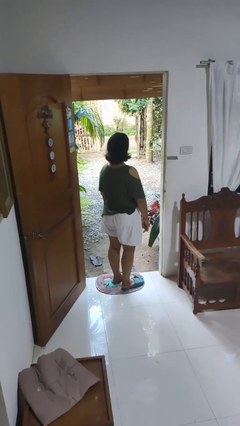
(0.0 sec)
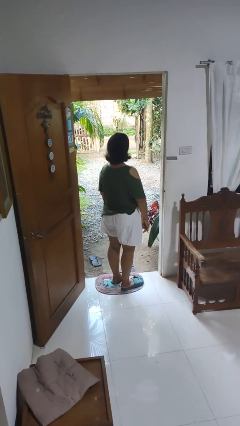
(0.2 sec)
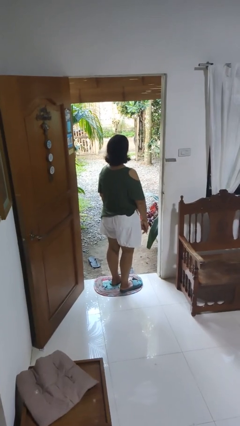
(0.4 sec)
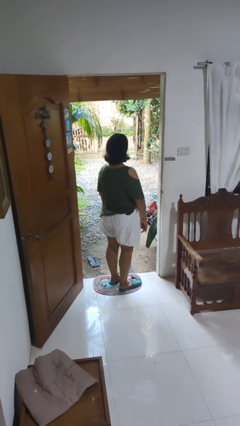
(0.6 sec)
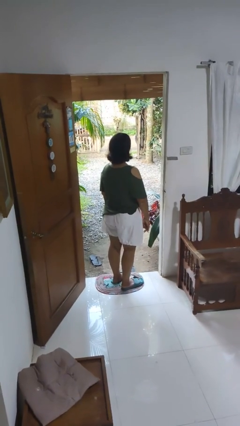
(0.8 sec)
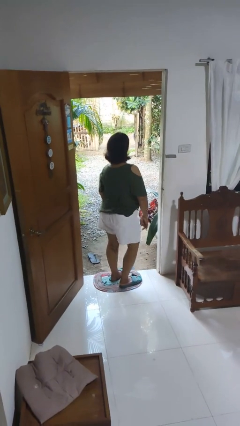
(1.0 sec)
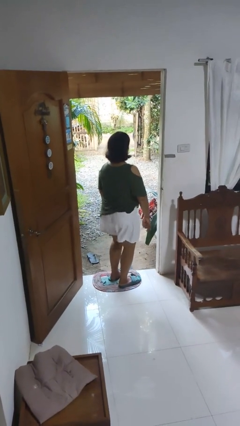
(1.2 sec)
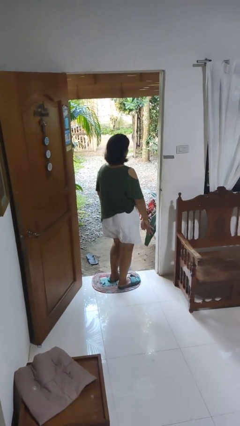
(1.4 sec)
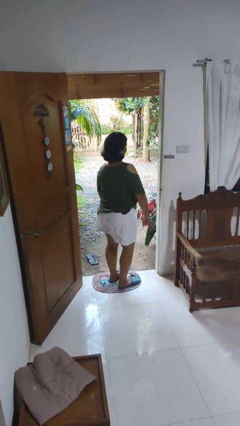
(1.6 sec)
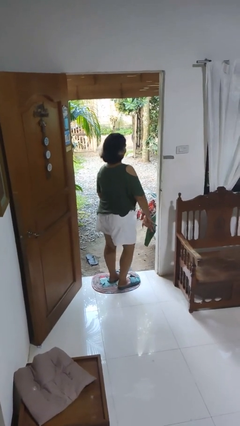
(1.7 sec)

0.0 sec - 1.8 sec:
person wiggles hips

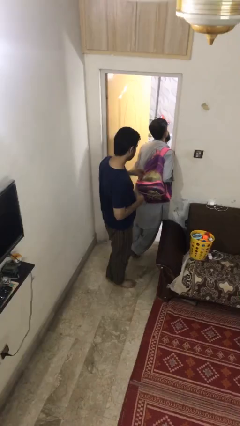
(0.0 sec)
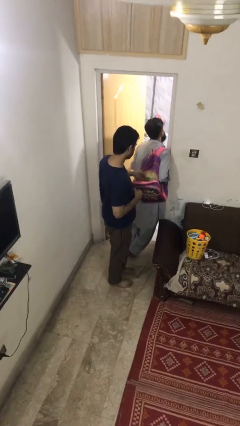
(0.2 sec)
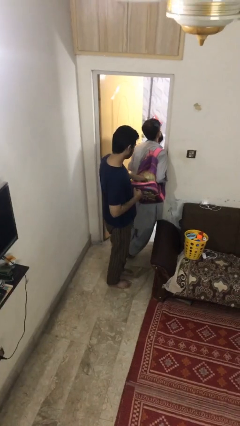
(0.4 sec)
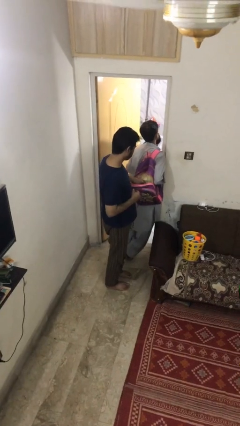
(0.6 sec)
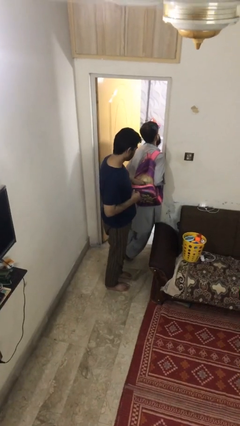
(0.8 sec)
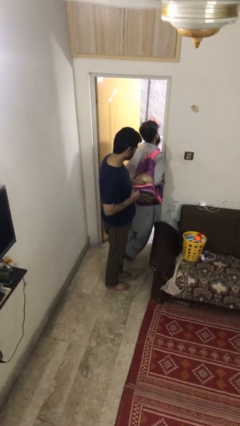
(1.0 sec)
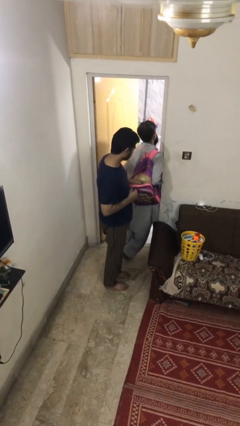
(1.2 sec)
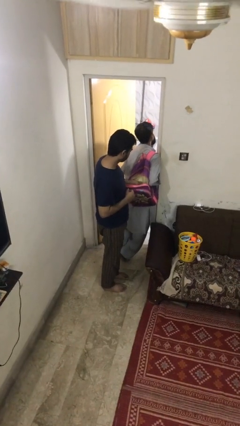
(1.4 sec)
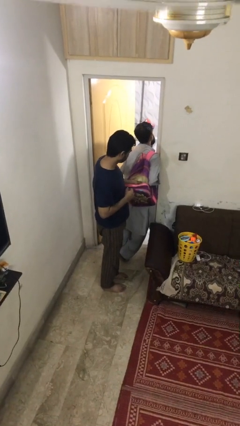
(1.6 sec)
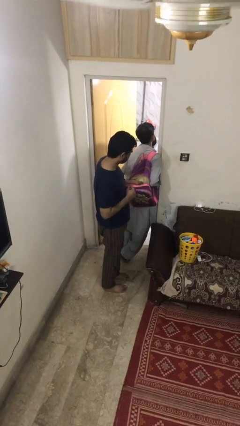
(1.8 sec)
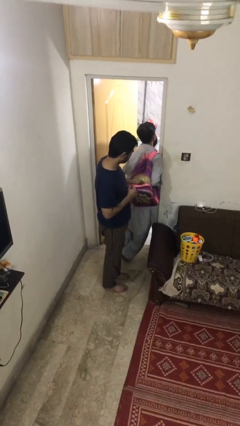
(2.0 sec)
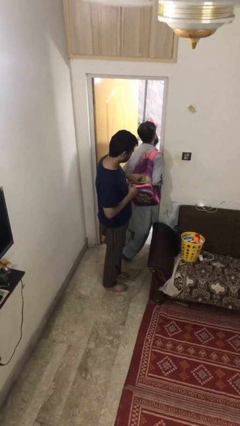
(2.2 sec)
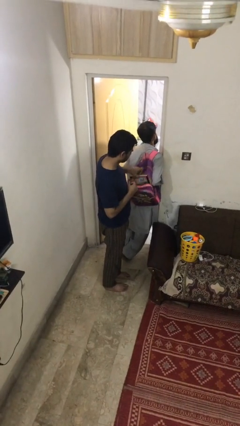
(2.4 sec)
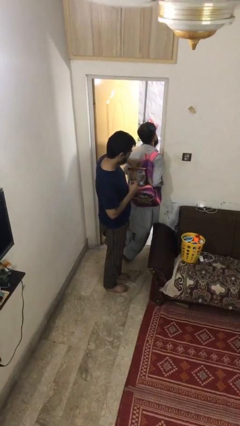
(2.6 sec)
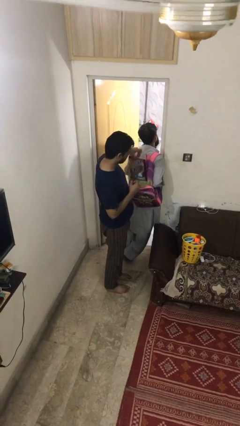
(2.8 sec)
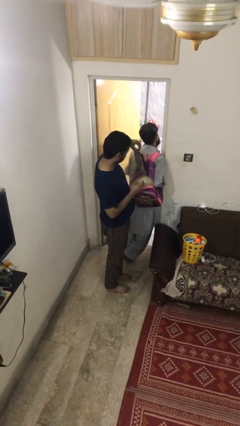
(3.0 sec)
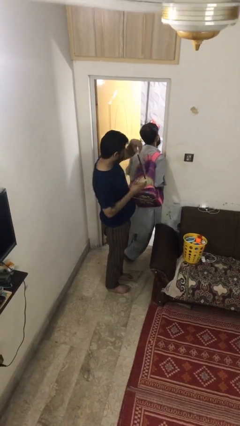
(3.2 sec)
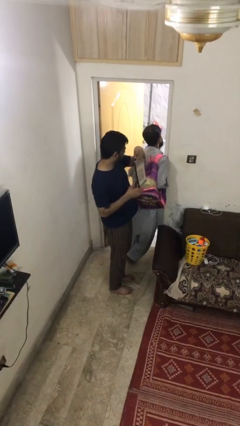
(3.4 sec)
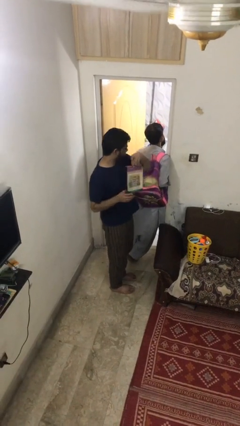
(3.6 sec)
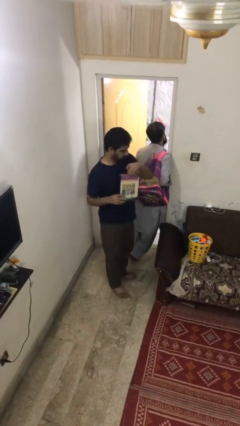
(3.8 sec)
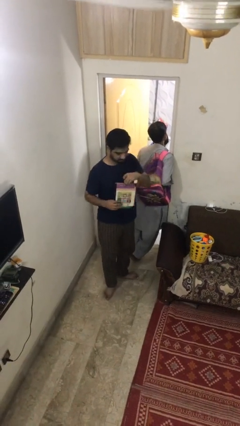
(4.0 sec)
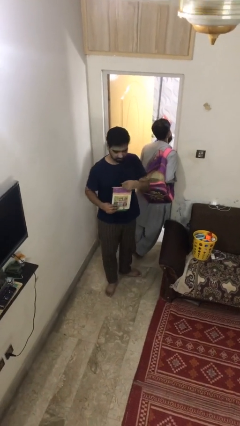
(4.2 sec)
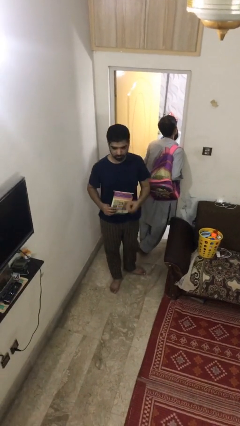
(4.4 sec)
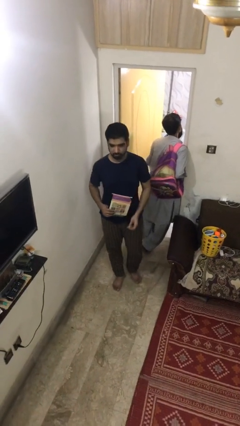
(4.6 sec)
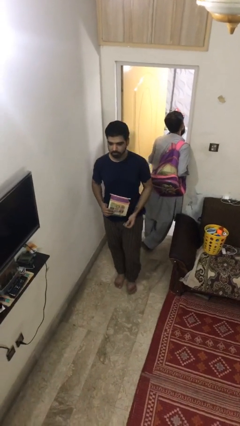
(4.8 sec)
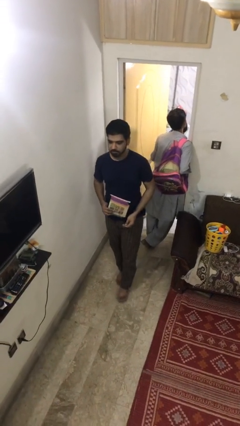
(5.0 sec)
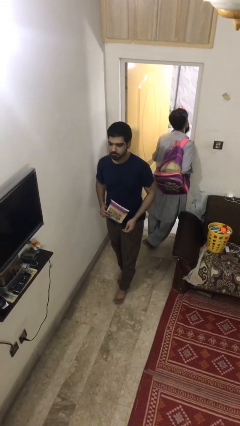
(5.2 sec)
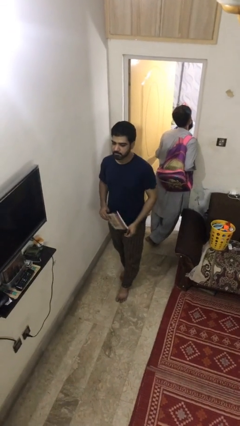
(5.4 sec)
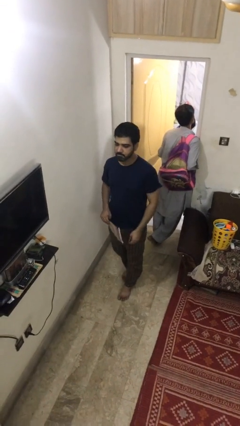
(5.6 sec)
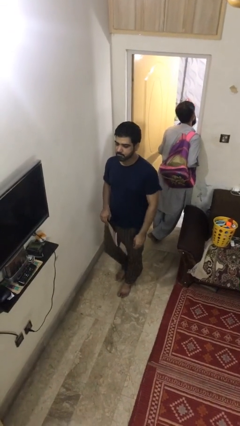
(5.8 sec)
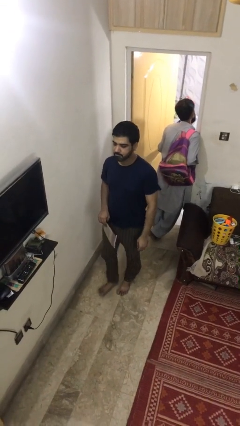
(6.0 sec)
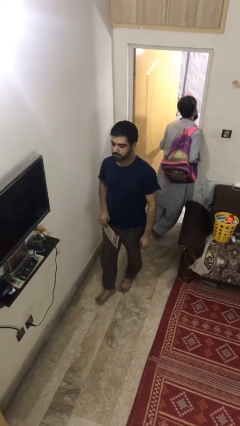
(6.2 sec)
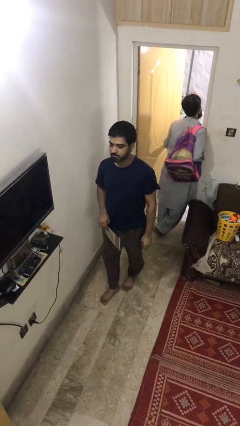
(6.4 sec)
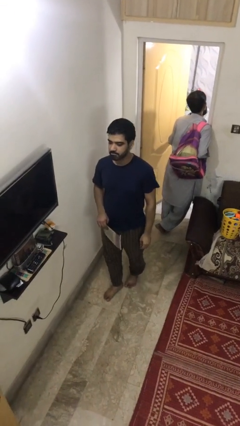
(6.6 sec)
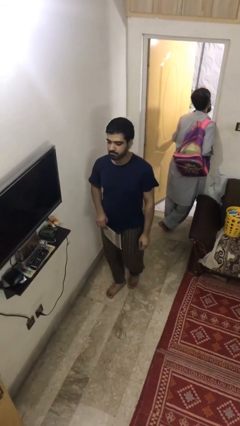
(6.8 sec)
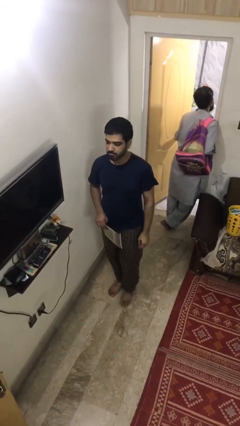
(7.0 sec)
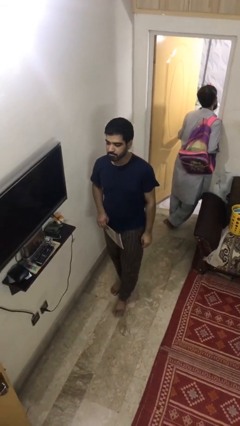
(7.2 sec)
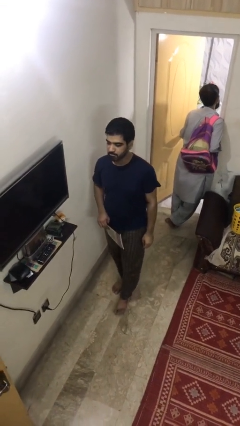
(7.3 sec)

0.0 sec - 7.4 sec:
person steals object from person

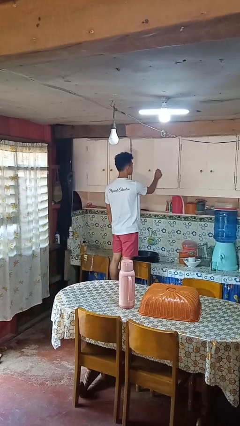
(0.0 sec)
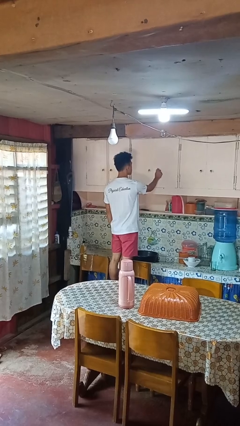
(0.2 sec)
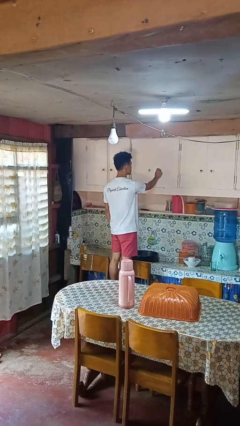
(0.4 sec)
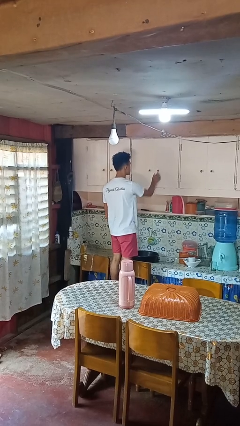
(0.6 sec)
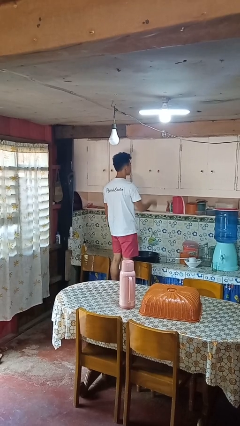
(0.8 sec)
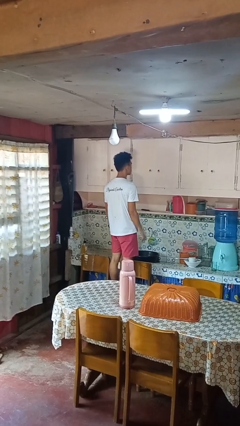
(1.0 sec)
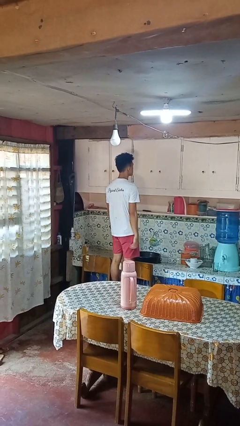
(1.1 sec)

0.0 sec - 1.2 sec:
person closes cabinet

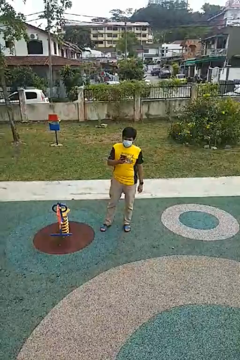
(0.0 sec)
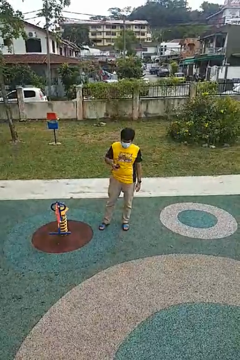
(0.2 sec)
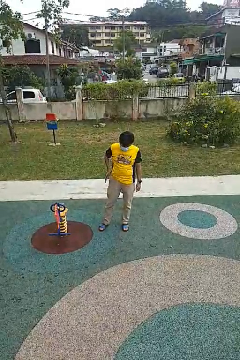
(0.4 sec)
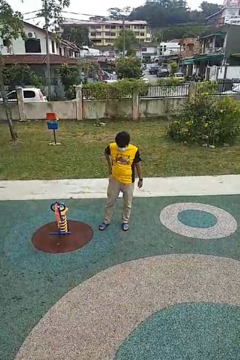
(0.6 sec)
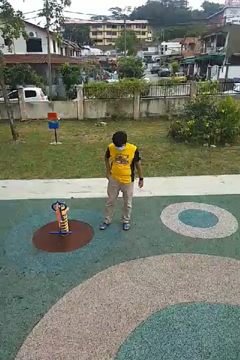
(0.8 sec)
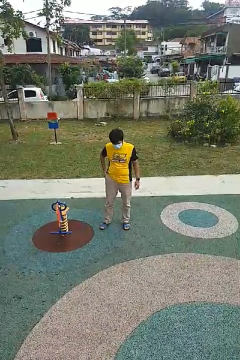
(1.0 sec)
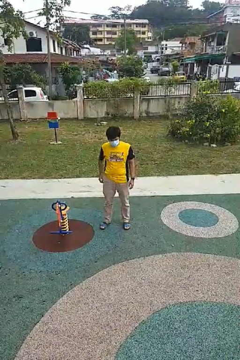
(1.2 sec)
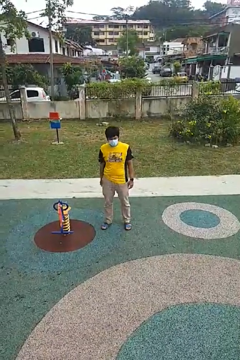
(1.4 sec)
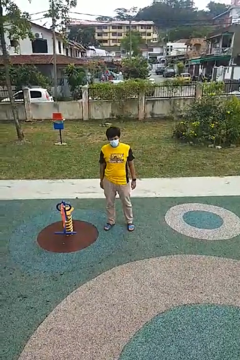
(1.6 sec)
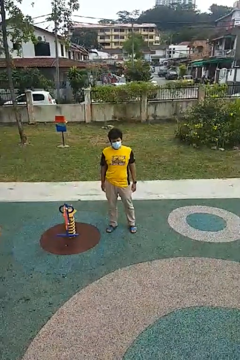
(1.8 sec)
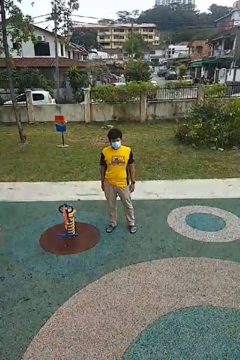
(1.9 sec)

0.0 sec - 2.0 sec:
person puts phone into pocket

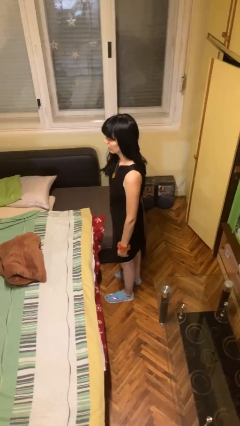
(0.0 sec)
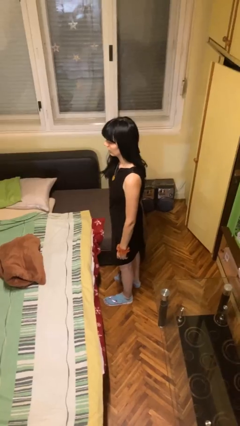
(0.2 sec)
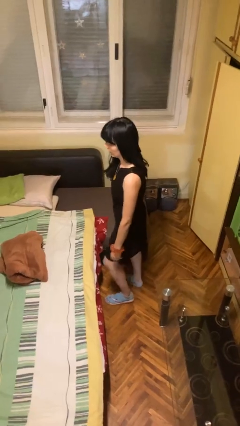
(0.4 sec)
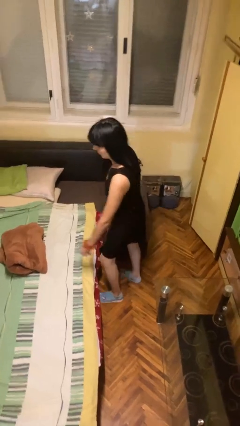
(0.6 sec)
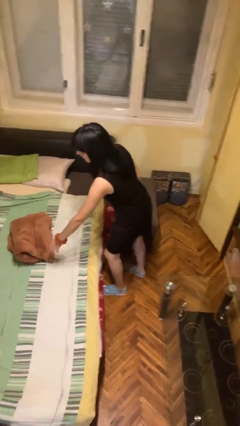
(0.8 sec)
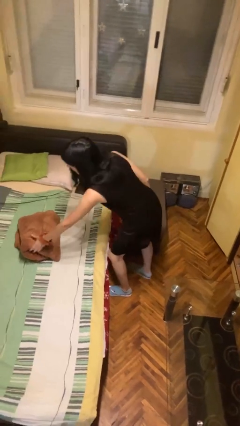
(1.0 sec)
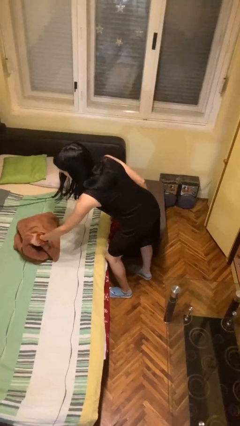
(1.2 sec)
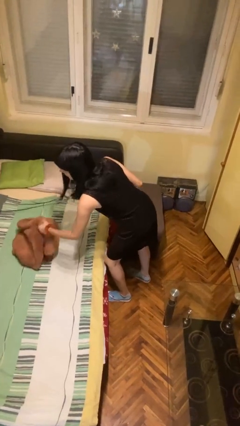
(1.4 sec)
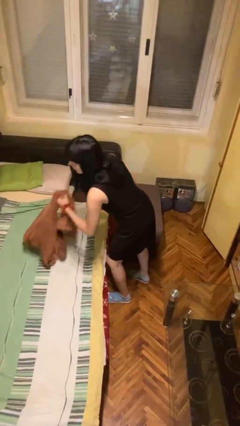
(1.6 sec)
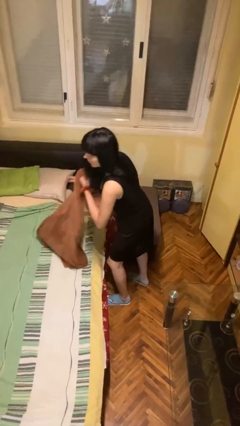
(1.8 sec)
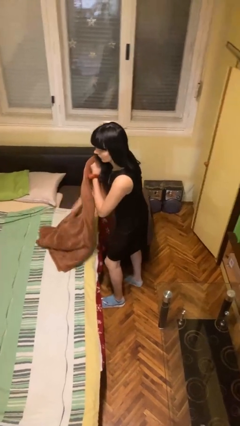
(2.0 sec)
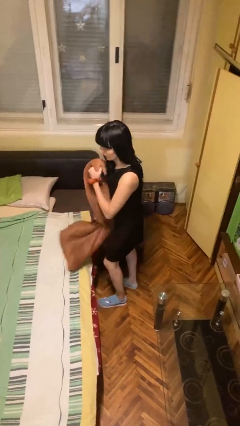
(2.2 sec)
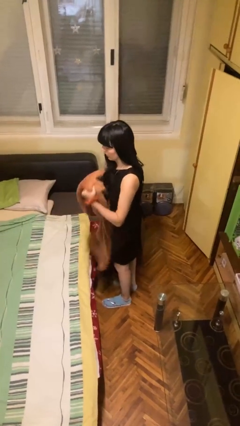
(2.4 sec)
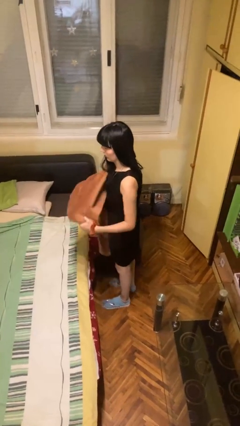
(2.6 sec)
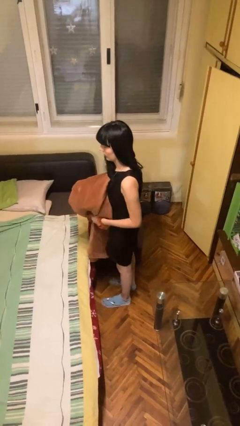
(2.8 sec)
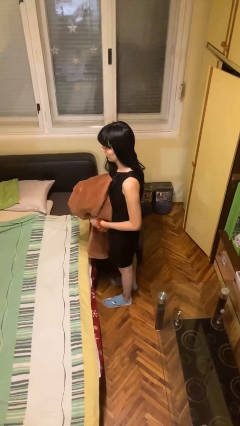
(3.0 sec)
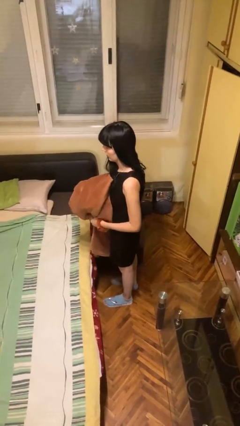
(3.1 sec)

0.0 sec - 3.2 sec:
person picks up object from bed

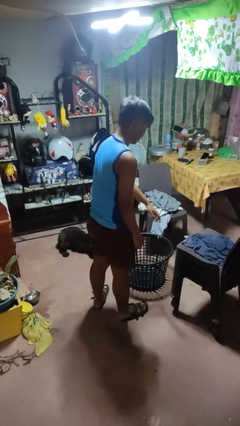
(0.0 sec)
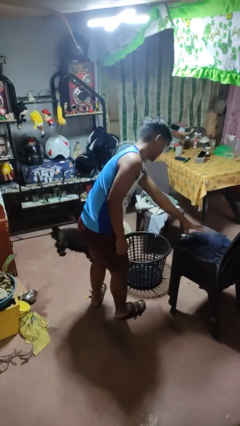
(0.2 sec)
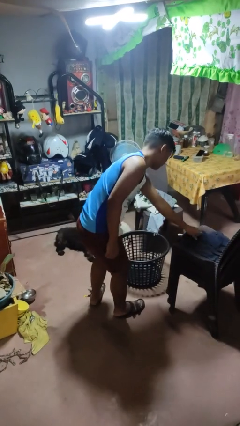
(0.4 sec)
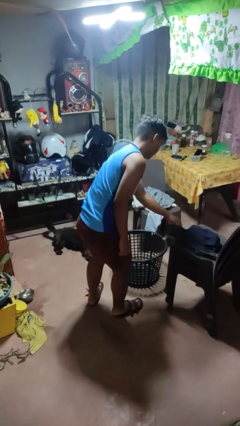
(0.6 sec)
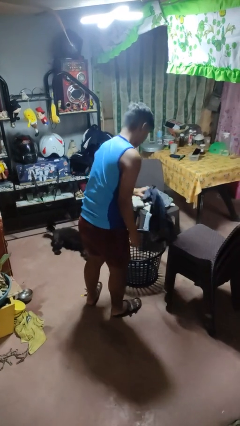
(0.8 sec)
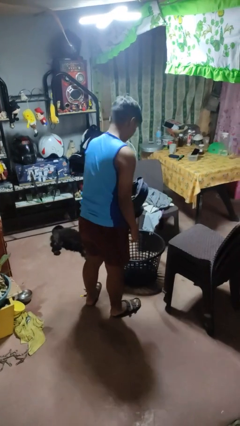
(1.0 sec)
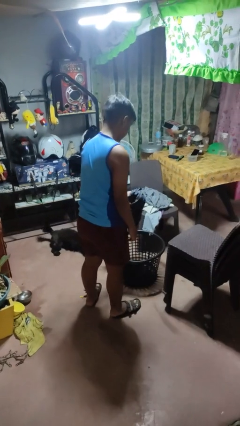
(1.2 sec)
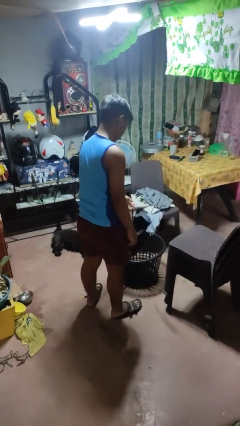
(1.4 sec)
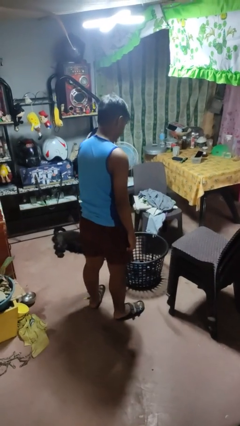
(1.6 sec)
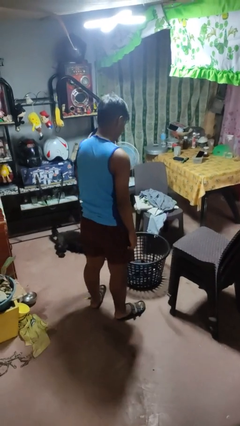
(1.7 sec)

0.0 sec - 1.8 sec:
person puts object into basket
